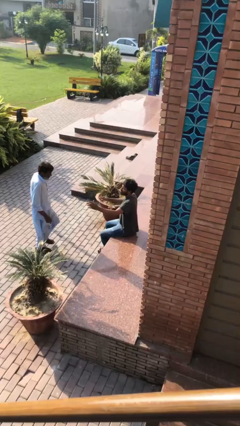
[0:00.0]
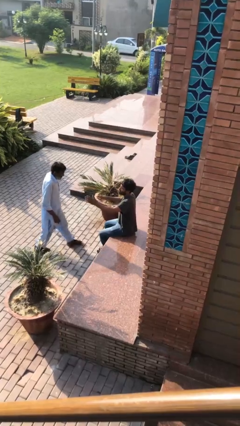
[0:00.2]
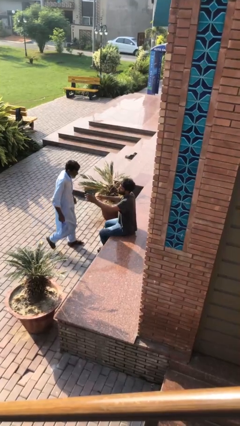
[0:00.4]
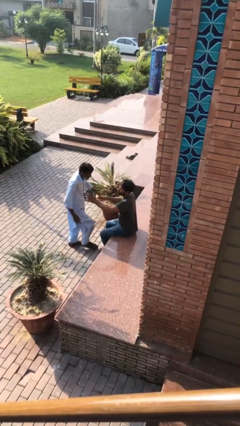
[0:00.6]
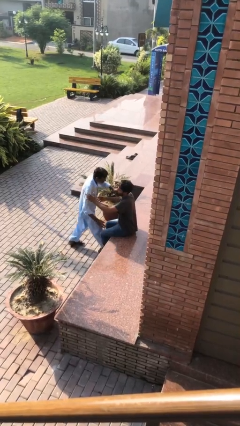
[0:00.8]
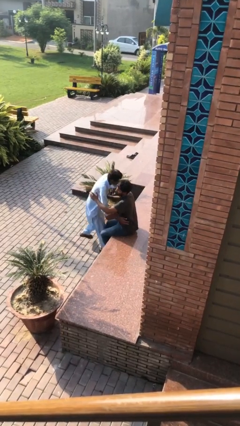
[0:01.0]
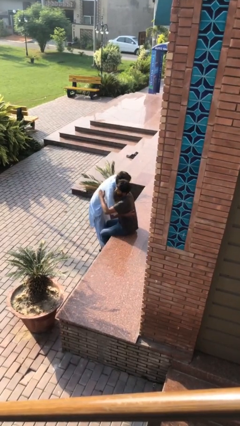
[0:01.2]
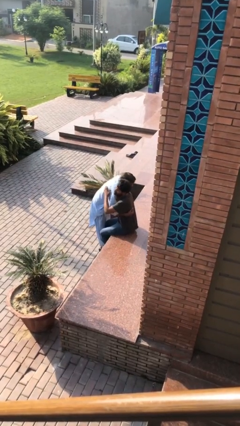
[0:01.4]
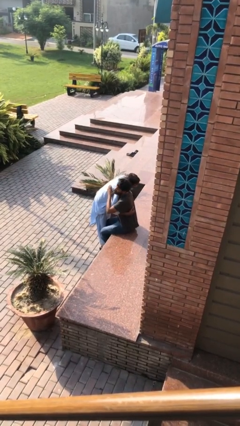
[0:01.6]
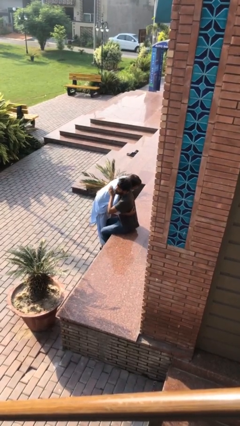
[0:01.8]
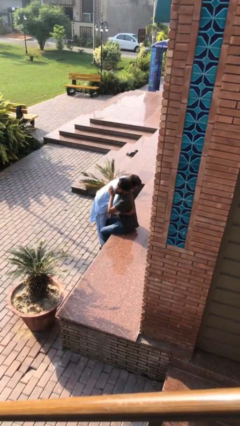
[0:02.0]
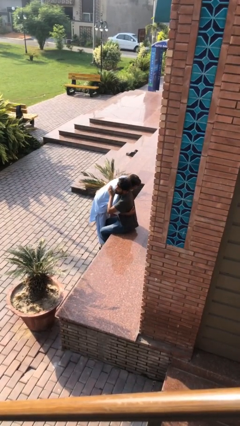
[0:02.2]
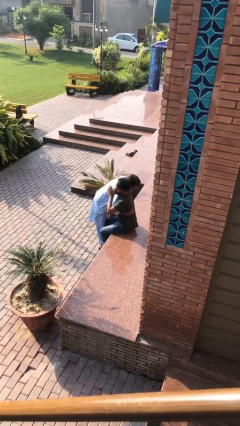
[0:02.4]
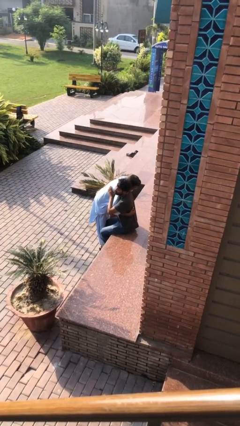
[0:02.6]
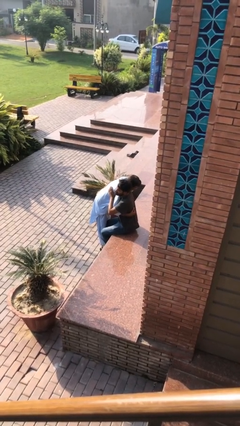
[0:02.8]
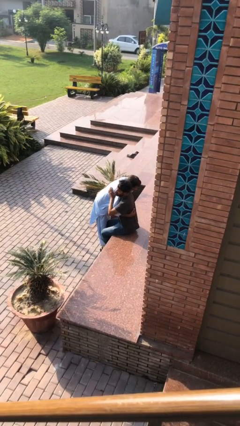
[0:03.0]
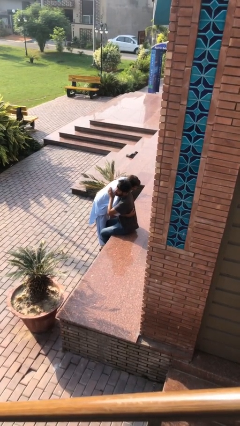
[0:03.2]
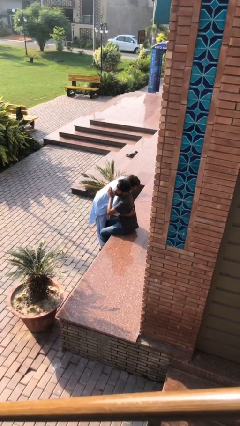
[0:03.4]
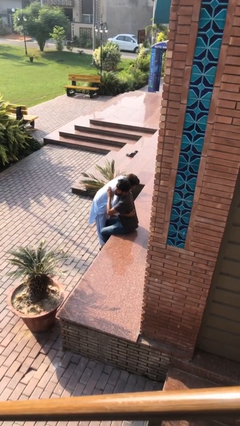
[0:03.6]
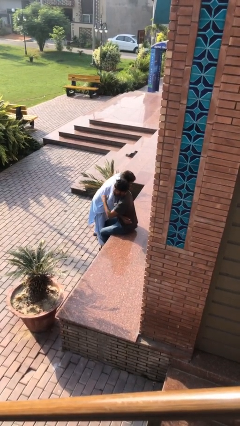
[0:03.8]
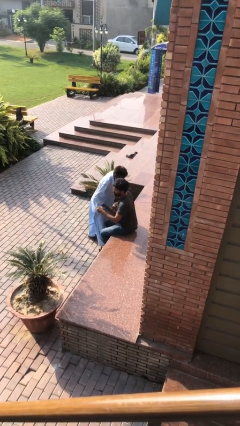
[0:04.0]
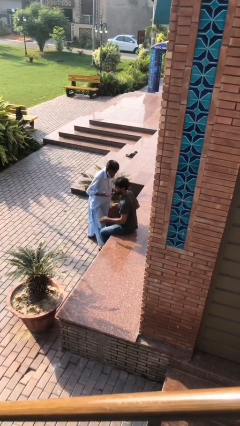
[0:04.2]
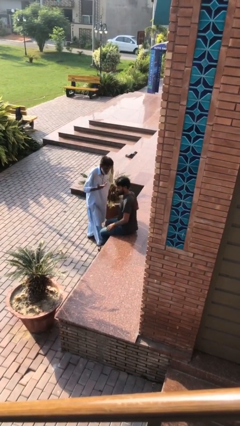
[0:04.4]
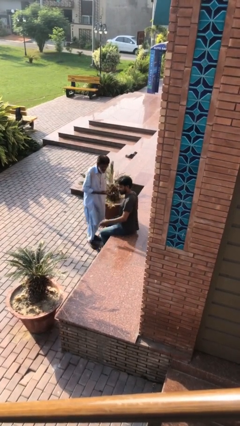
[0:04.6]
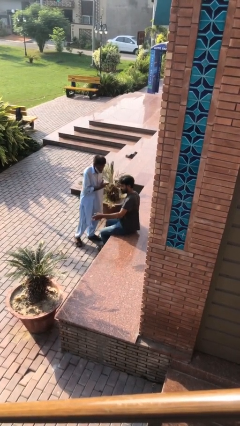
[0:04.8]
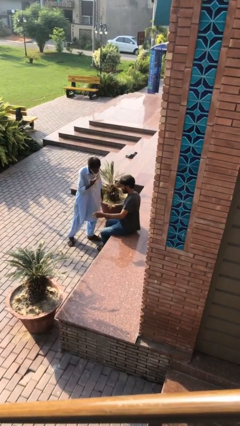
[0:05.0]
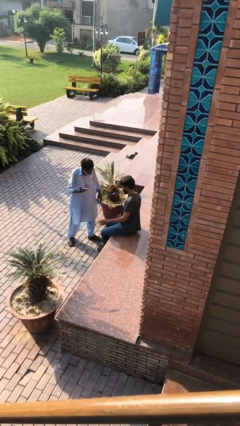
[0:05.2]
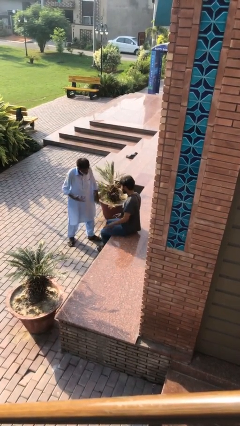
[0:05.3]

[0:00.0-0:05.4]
person embraces person

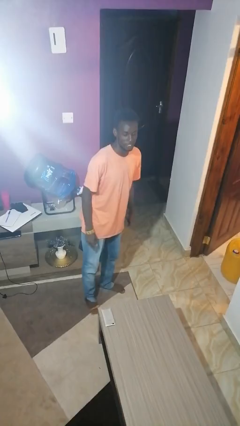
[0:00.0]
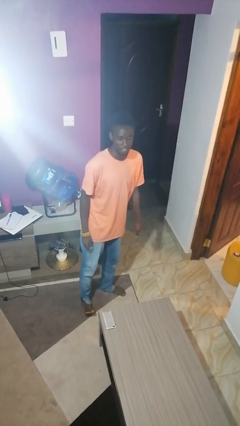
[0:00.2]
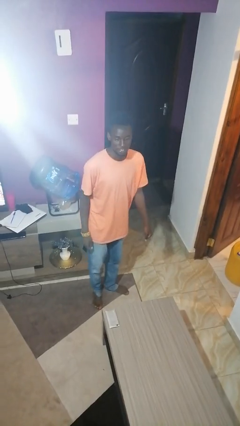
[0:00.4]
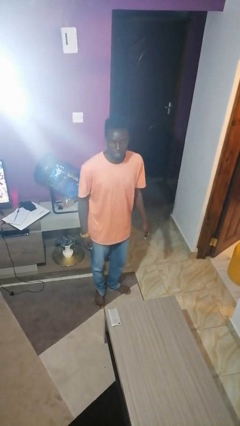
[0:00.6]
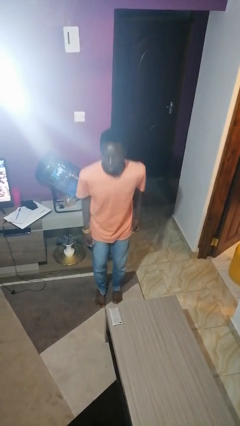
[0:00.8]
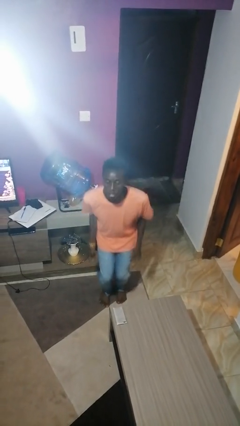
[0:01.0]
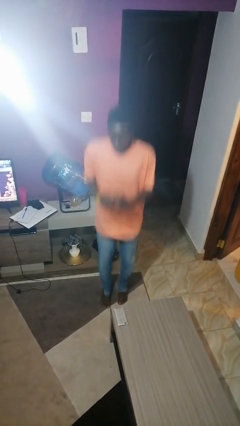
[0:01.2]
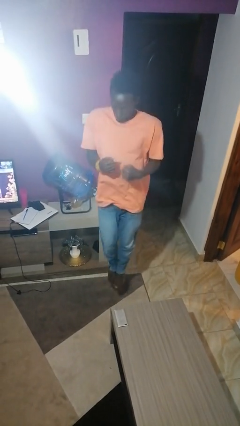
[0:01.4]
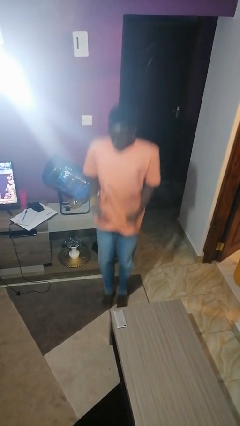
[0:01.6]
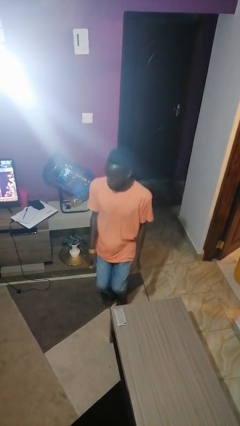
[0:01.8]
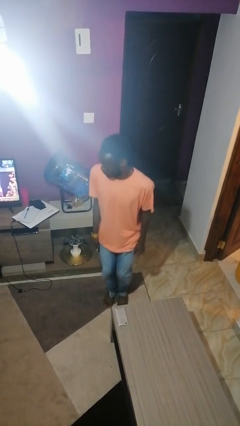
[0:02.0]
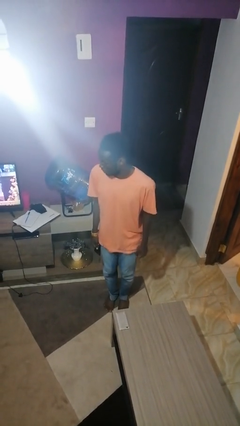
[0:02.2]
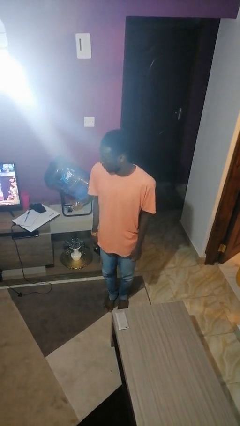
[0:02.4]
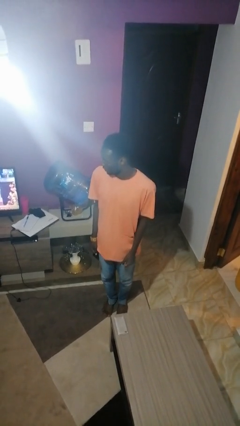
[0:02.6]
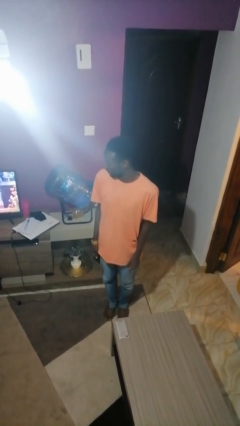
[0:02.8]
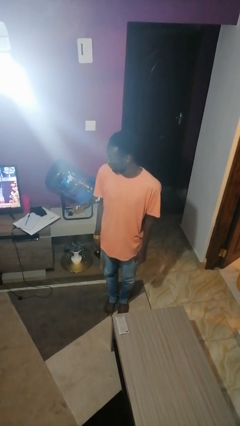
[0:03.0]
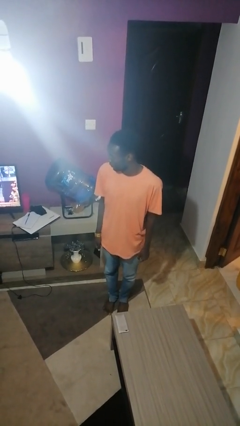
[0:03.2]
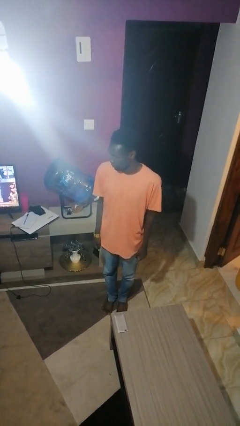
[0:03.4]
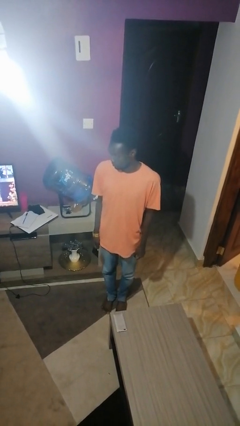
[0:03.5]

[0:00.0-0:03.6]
person jumps

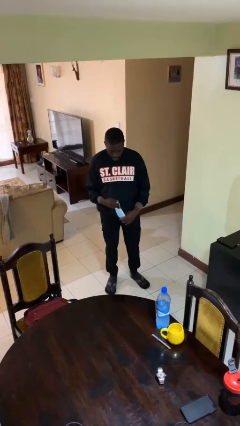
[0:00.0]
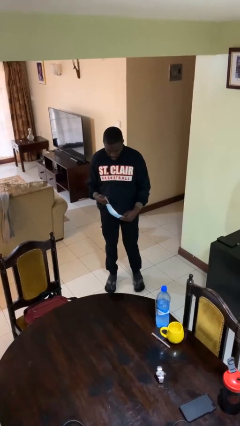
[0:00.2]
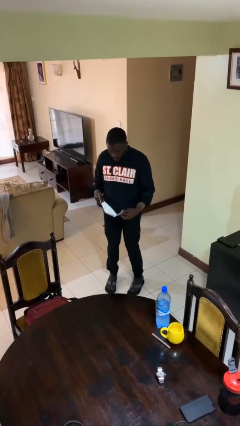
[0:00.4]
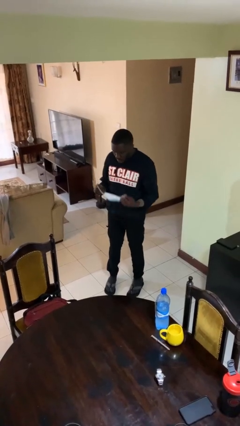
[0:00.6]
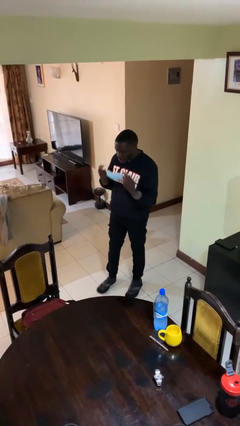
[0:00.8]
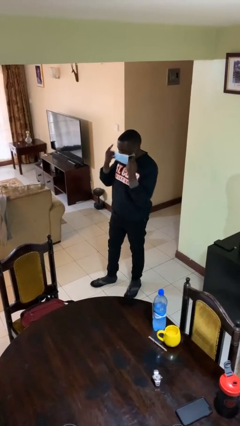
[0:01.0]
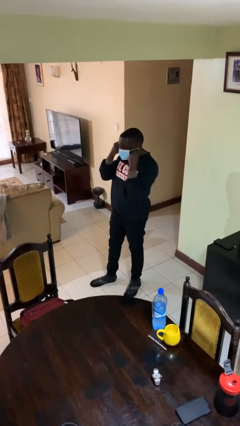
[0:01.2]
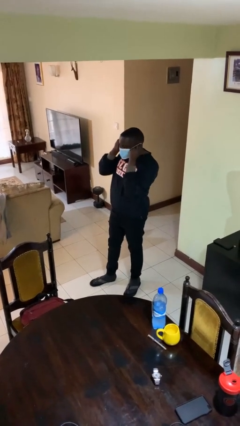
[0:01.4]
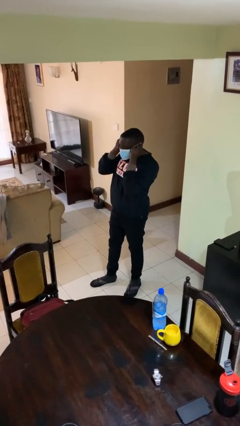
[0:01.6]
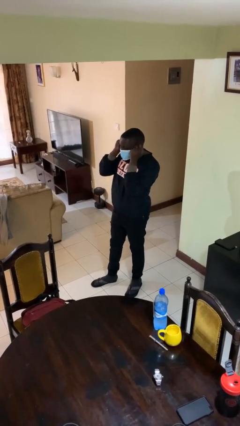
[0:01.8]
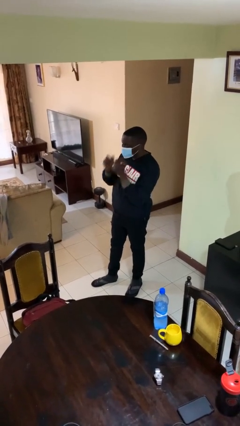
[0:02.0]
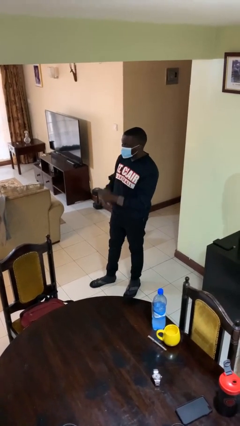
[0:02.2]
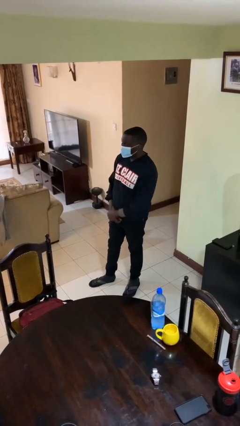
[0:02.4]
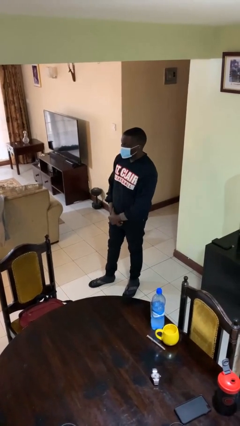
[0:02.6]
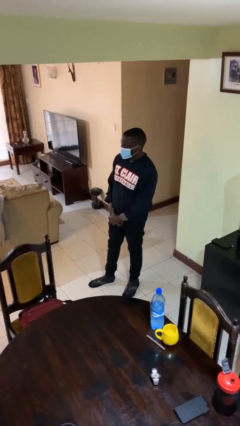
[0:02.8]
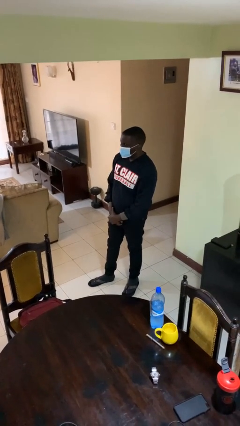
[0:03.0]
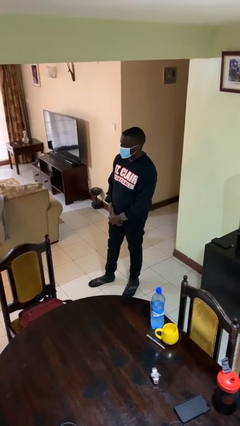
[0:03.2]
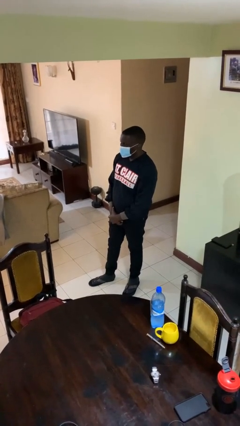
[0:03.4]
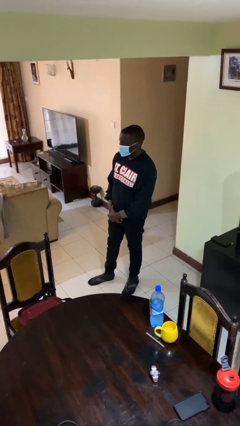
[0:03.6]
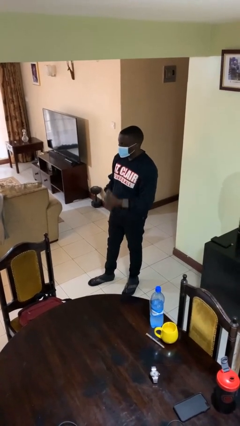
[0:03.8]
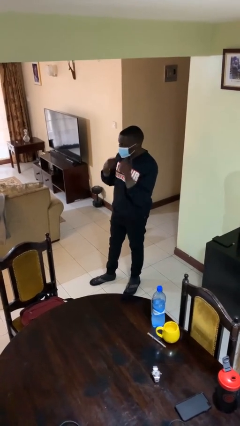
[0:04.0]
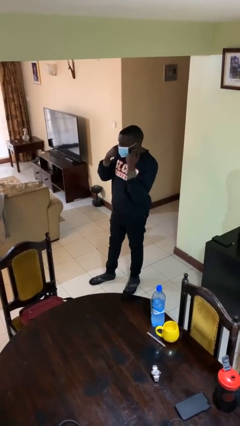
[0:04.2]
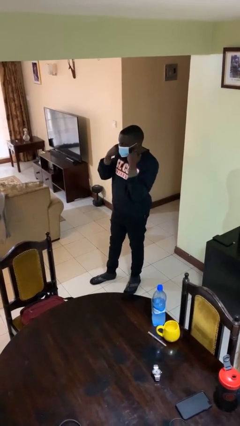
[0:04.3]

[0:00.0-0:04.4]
person puts on facemask

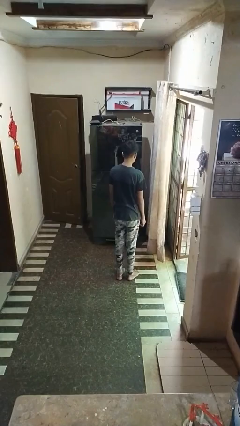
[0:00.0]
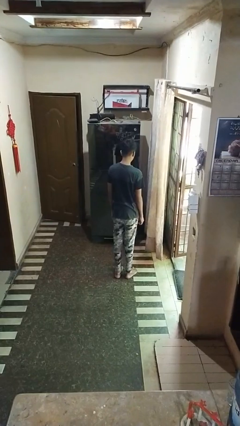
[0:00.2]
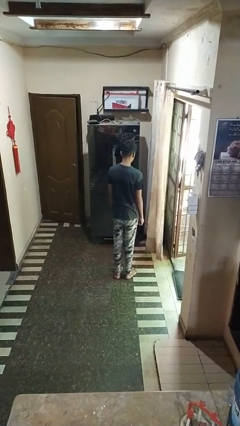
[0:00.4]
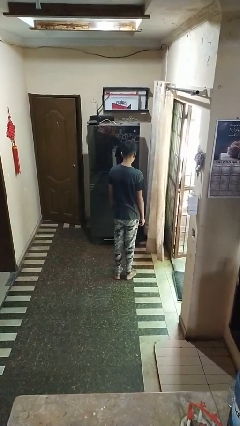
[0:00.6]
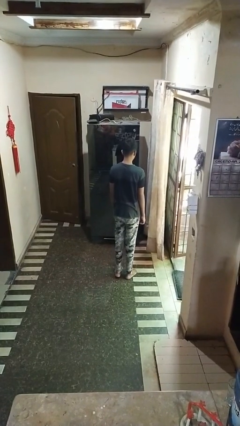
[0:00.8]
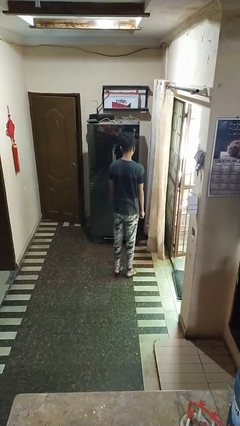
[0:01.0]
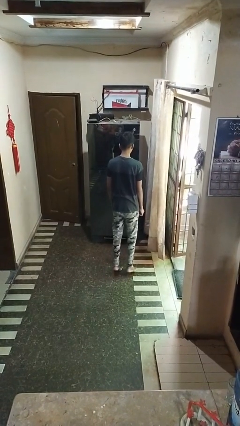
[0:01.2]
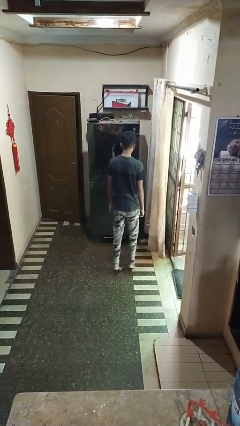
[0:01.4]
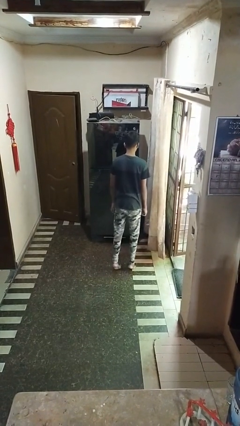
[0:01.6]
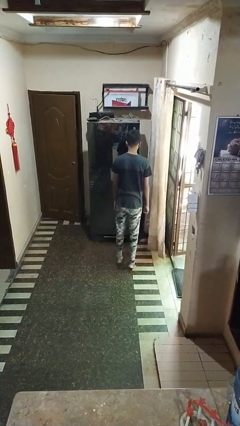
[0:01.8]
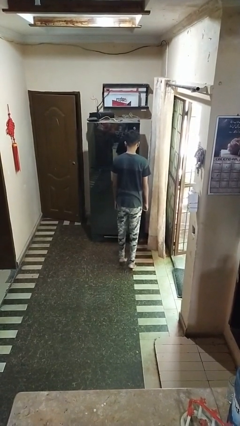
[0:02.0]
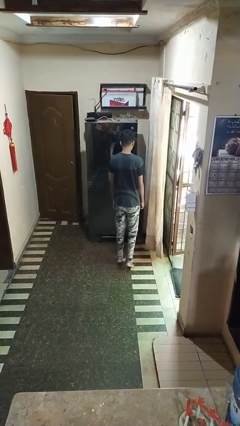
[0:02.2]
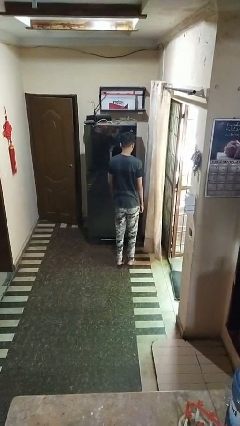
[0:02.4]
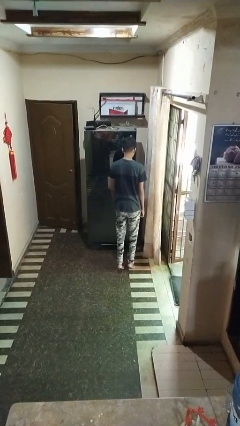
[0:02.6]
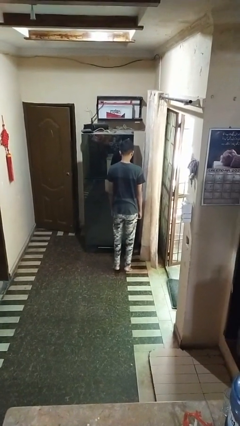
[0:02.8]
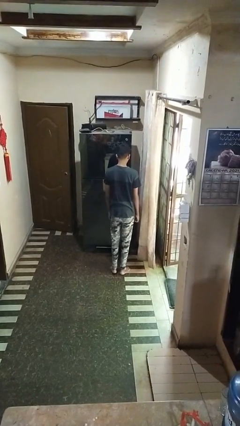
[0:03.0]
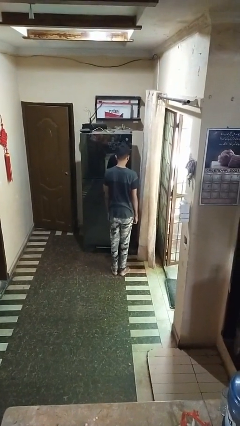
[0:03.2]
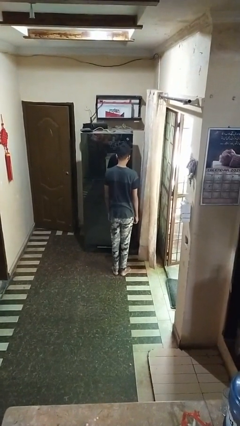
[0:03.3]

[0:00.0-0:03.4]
person walks tiptoe

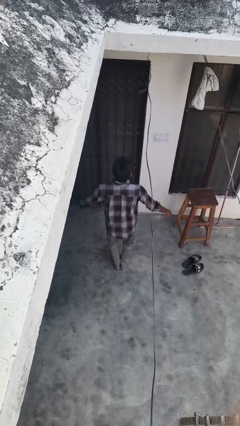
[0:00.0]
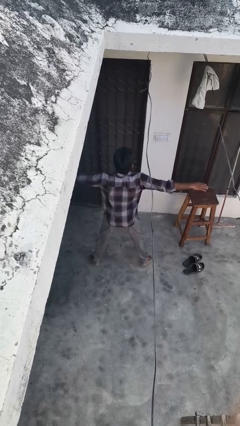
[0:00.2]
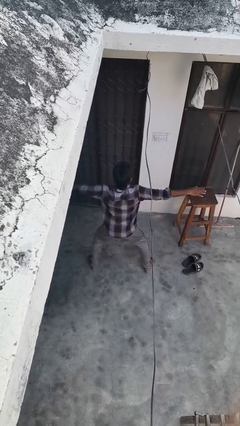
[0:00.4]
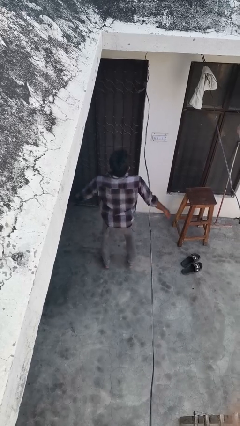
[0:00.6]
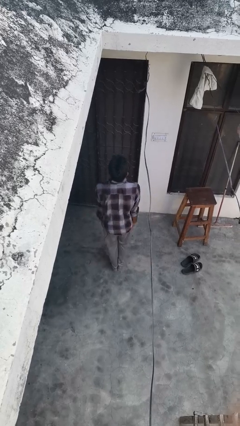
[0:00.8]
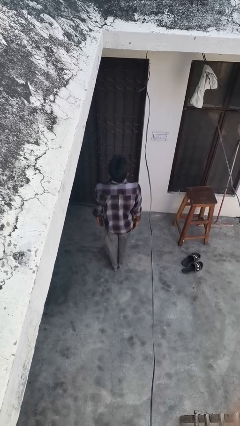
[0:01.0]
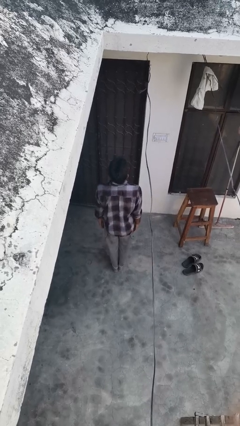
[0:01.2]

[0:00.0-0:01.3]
person exercises with jumping jacks
